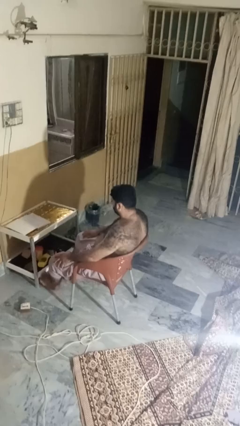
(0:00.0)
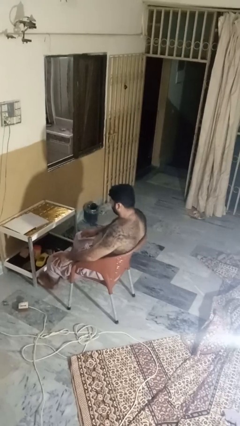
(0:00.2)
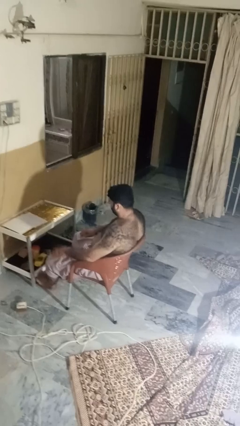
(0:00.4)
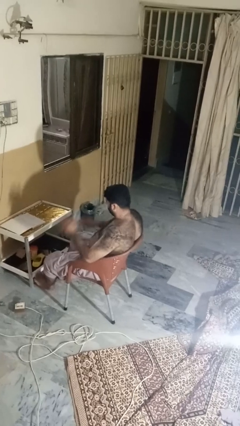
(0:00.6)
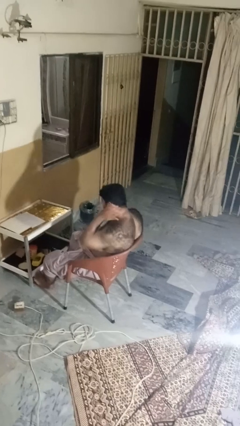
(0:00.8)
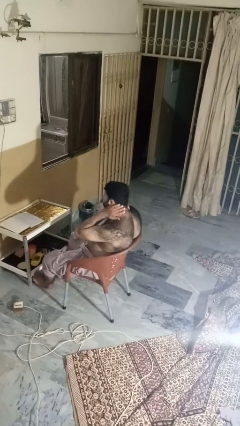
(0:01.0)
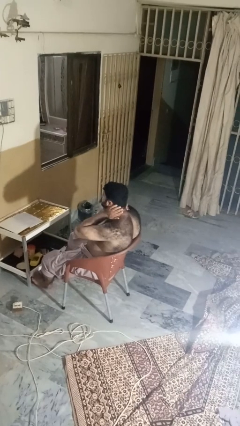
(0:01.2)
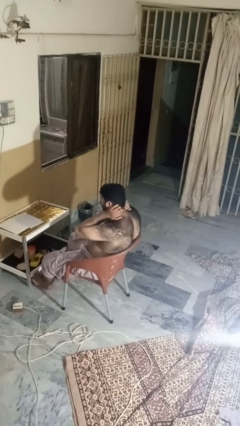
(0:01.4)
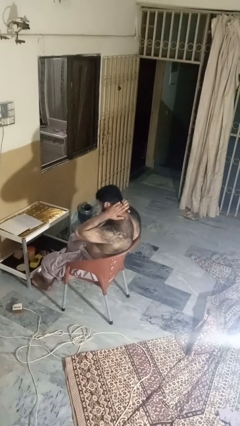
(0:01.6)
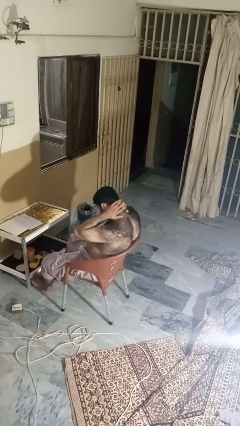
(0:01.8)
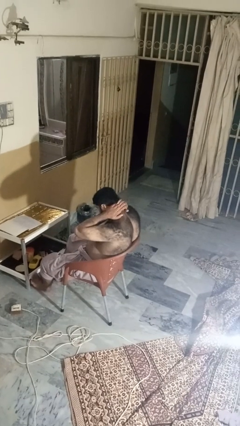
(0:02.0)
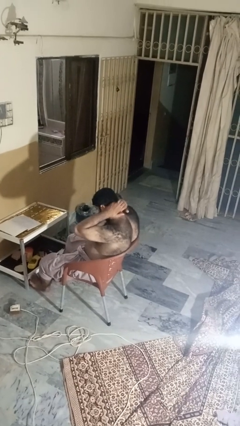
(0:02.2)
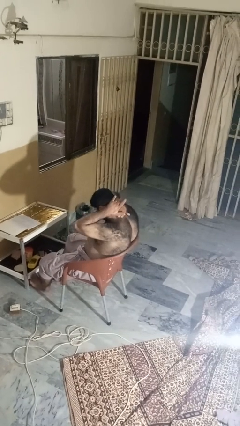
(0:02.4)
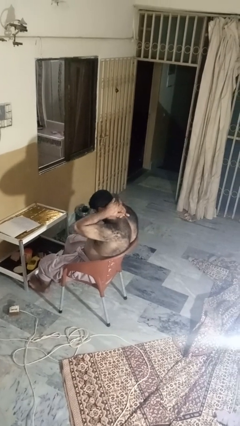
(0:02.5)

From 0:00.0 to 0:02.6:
person rubs neck

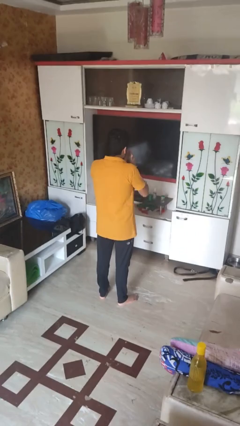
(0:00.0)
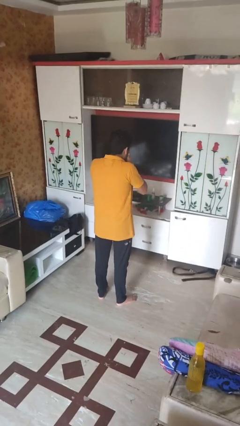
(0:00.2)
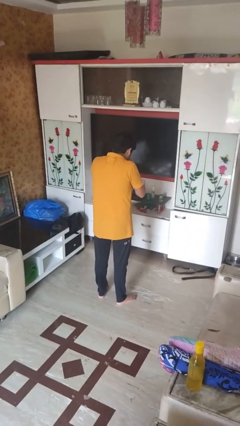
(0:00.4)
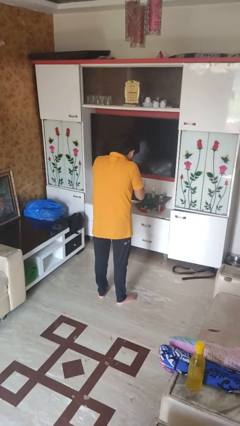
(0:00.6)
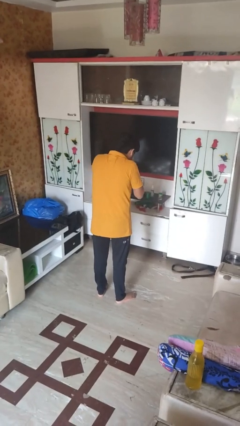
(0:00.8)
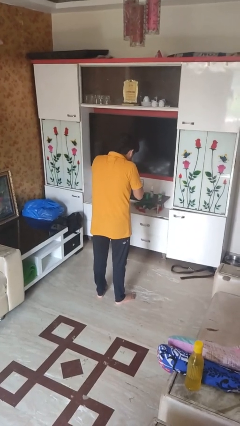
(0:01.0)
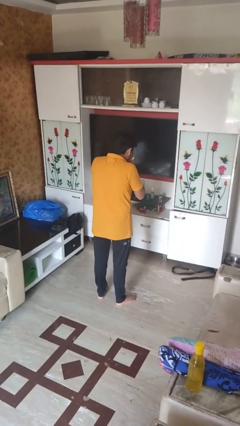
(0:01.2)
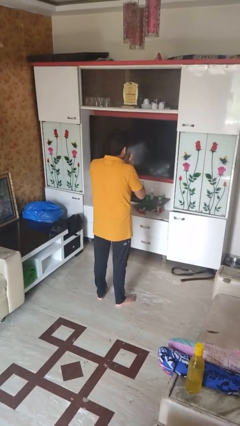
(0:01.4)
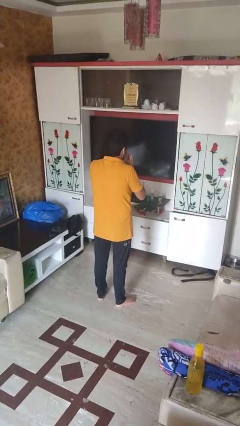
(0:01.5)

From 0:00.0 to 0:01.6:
person sneezes into hand

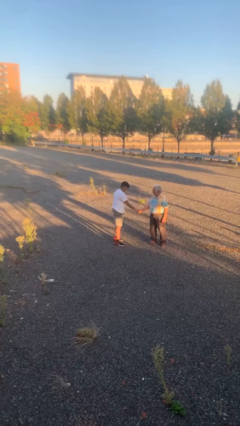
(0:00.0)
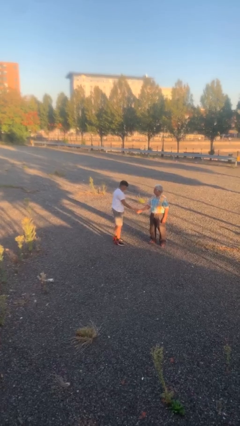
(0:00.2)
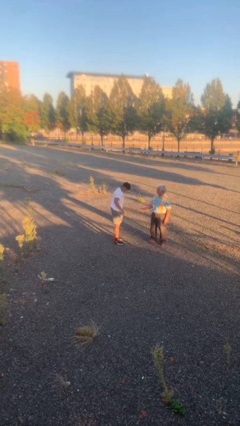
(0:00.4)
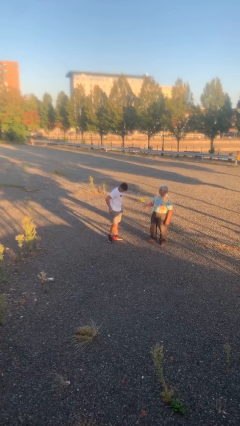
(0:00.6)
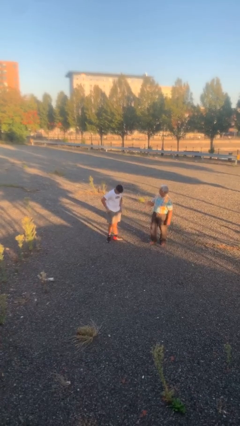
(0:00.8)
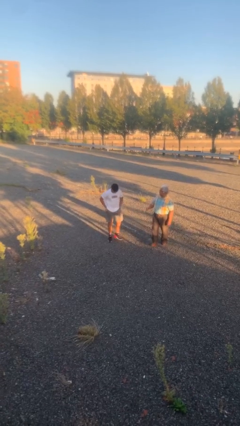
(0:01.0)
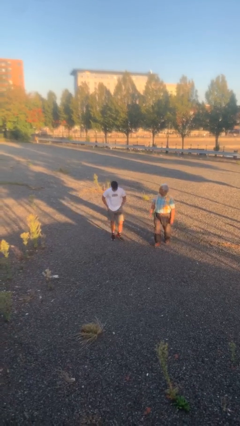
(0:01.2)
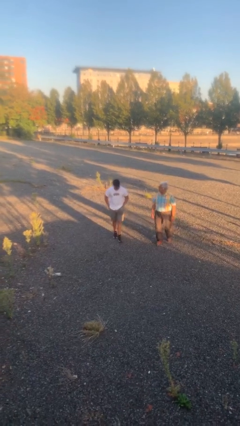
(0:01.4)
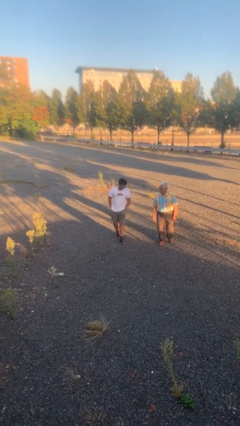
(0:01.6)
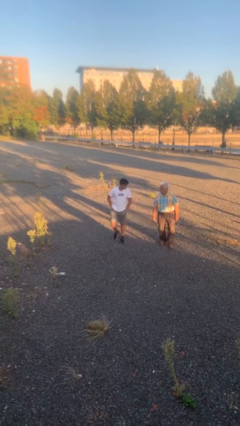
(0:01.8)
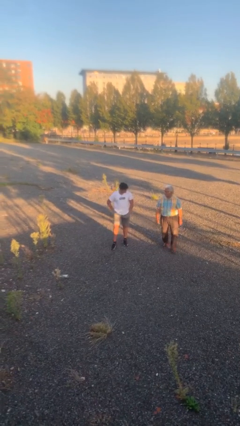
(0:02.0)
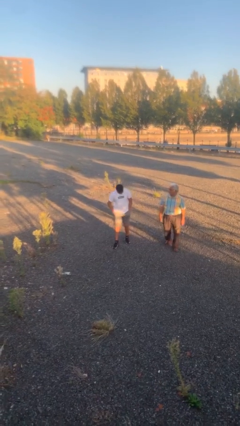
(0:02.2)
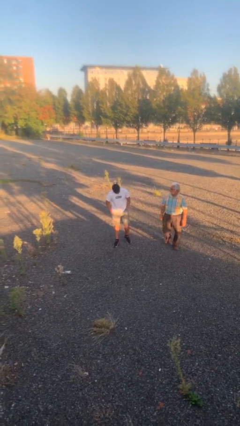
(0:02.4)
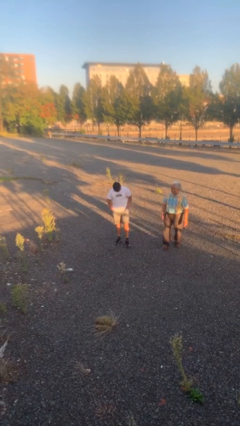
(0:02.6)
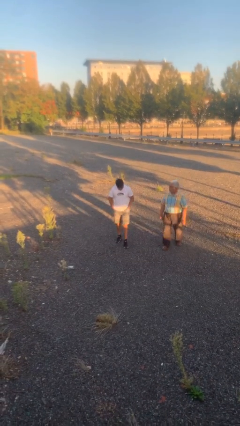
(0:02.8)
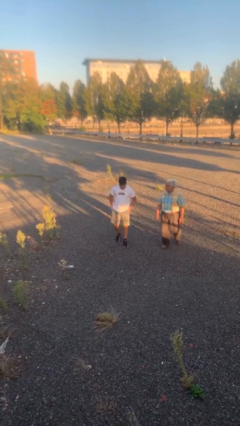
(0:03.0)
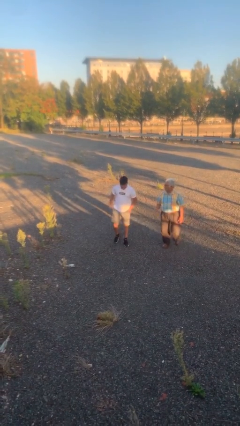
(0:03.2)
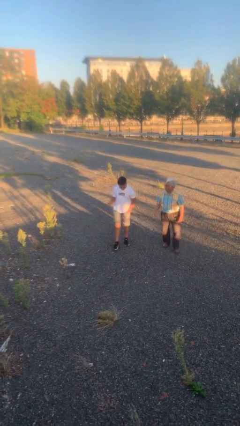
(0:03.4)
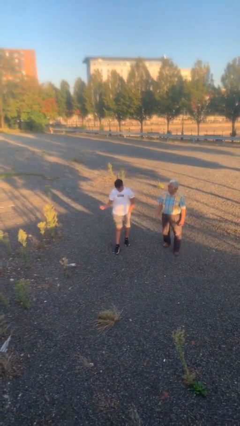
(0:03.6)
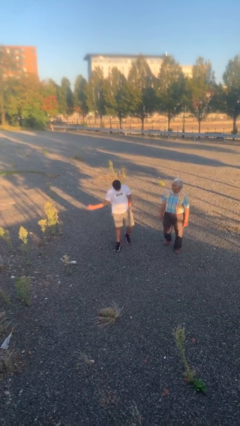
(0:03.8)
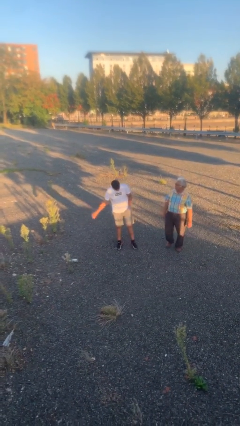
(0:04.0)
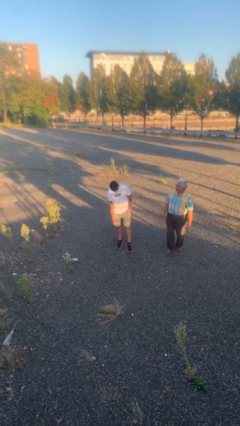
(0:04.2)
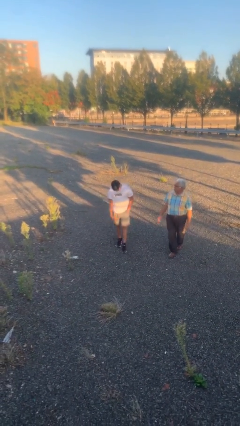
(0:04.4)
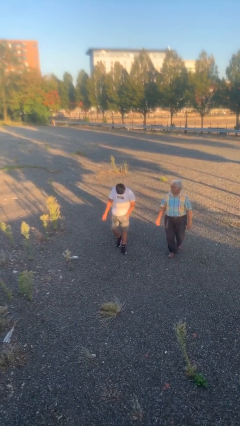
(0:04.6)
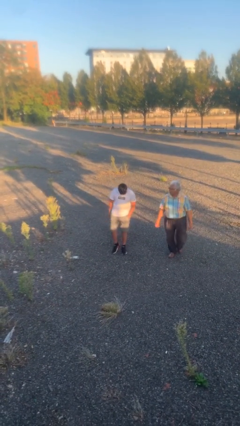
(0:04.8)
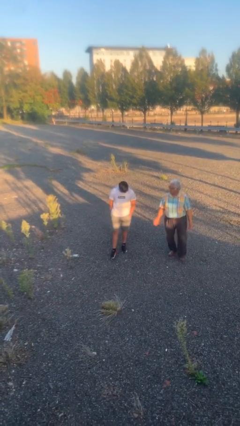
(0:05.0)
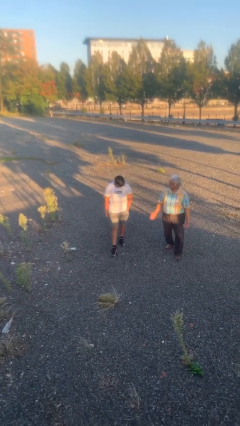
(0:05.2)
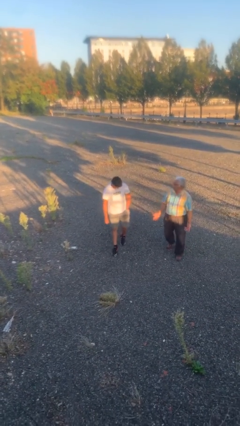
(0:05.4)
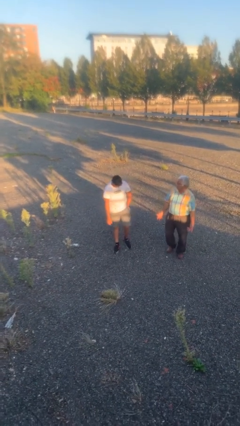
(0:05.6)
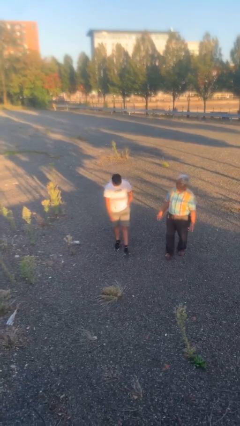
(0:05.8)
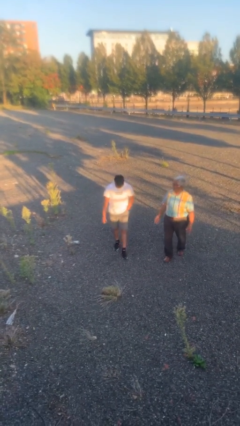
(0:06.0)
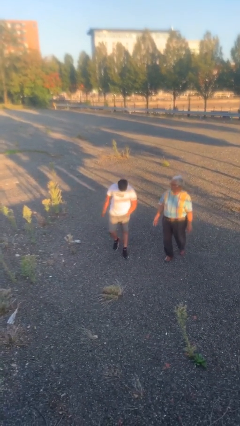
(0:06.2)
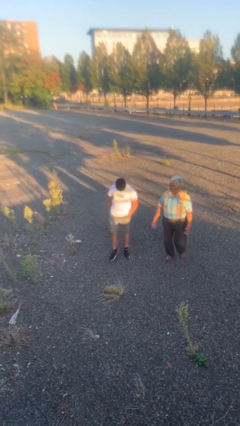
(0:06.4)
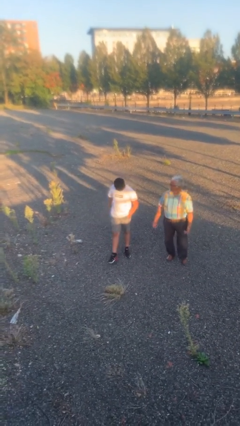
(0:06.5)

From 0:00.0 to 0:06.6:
person talks to person

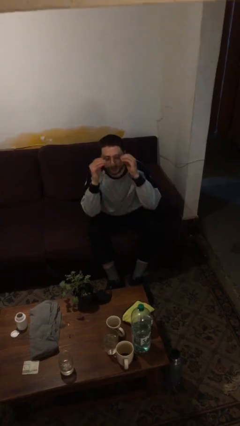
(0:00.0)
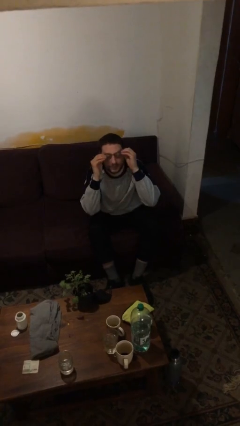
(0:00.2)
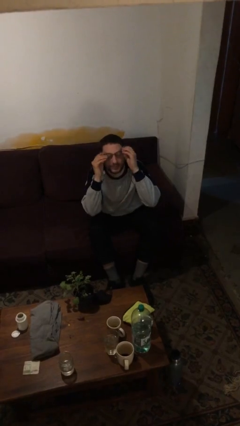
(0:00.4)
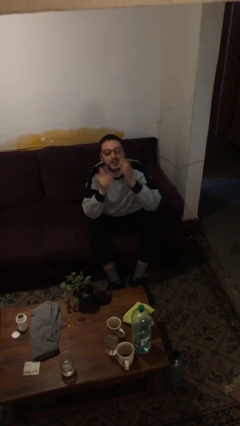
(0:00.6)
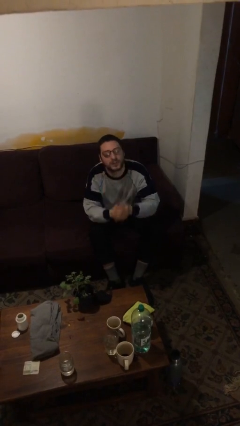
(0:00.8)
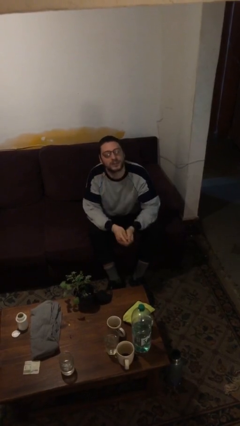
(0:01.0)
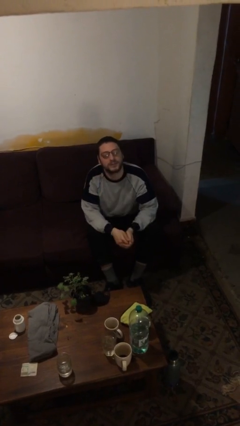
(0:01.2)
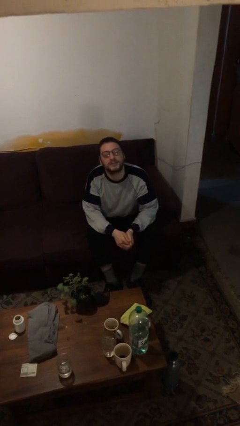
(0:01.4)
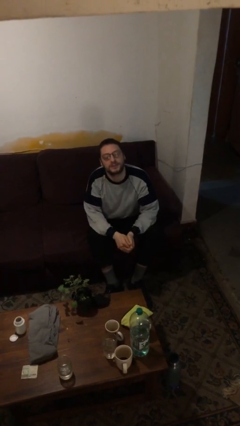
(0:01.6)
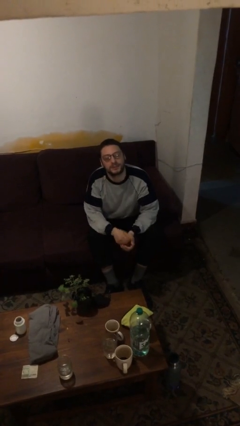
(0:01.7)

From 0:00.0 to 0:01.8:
person puts on glasses

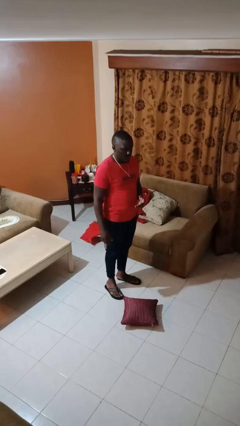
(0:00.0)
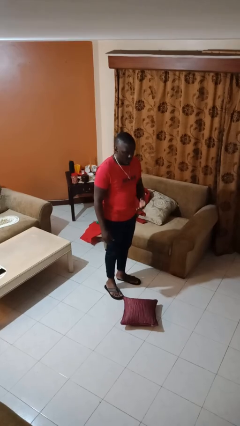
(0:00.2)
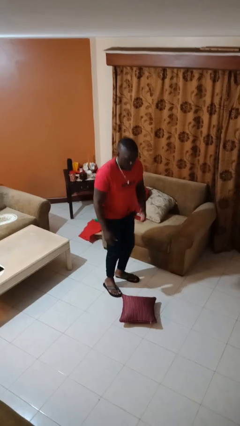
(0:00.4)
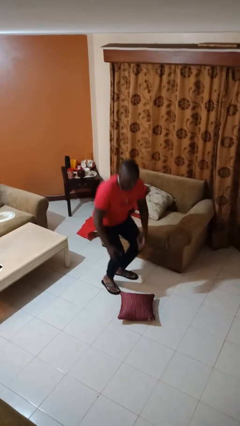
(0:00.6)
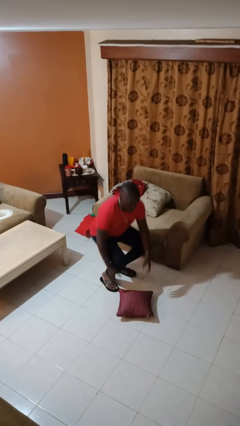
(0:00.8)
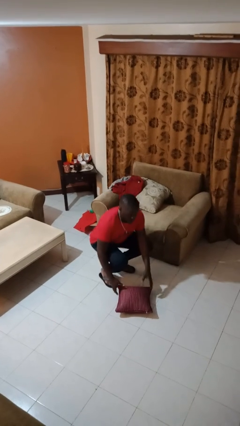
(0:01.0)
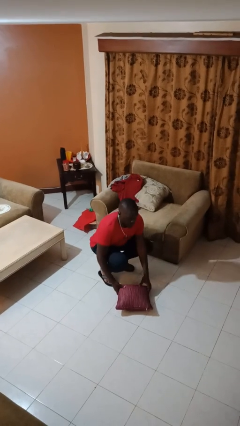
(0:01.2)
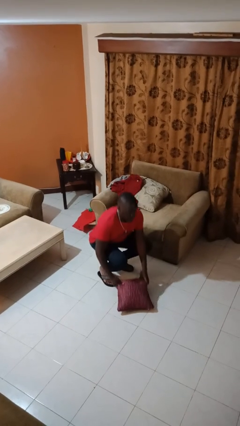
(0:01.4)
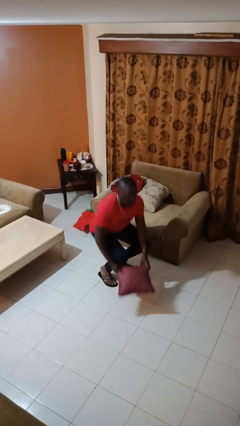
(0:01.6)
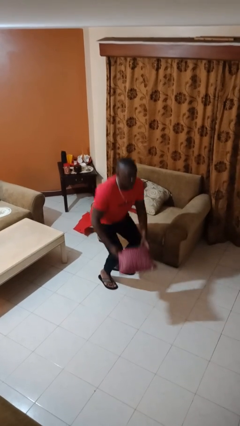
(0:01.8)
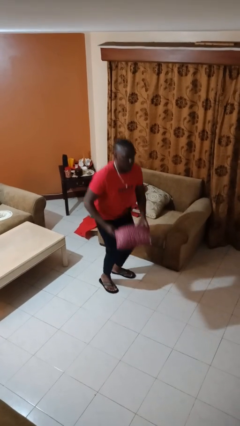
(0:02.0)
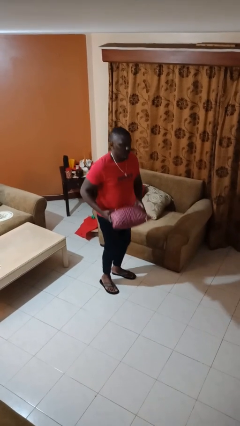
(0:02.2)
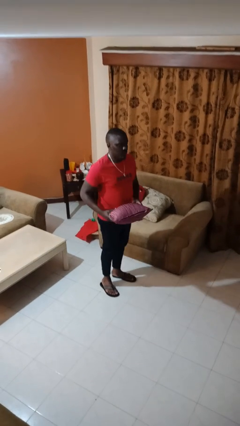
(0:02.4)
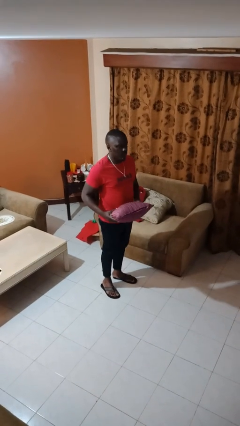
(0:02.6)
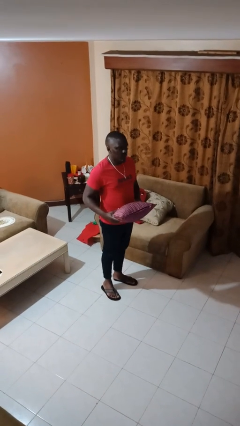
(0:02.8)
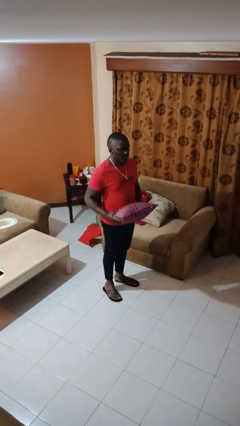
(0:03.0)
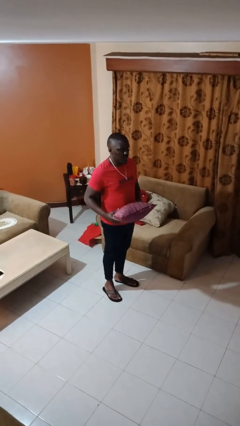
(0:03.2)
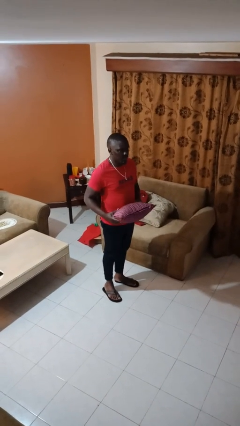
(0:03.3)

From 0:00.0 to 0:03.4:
person picks up object from floor

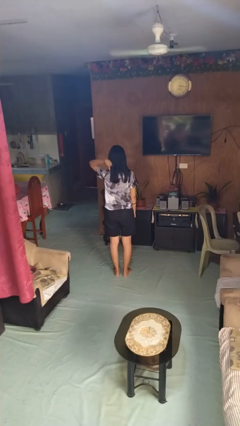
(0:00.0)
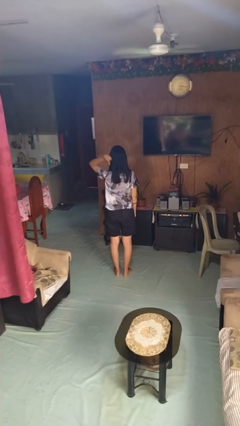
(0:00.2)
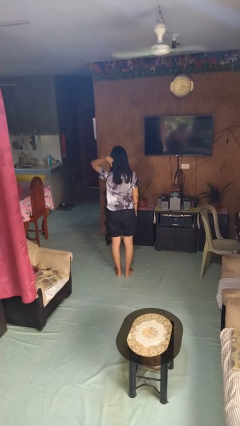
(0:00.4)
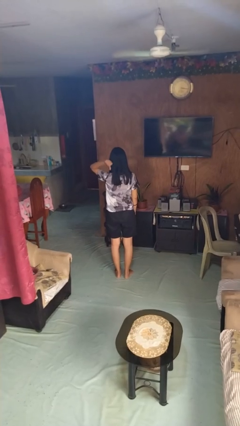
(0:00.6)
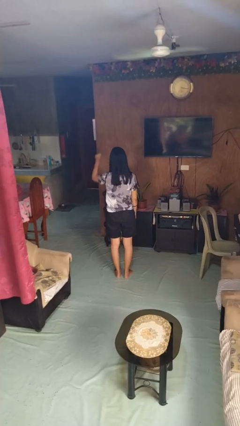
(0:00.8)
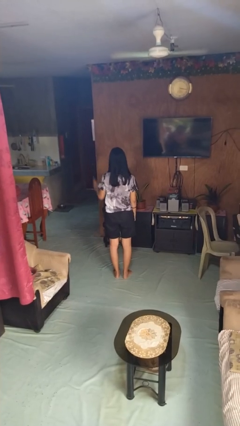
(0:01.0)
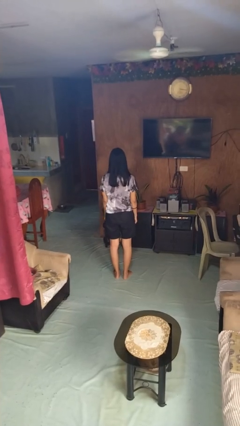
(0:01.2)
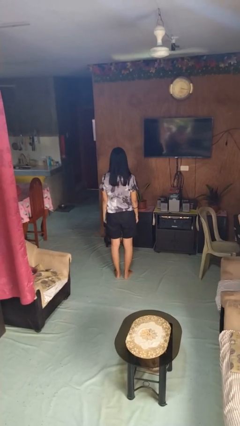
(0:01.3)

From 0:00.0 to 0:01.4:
person gestures behind me
